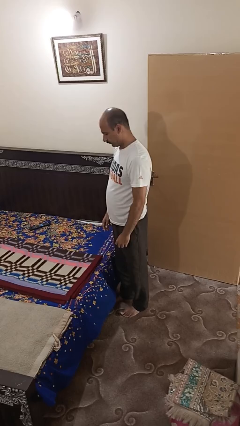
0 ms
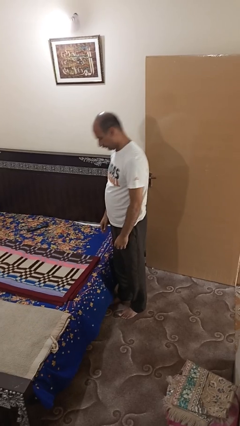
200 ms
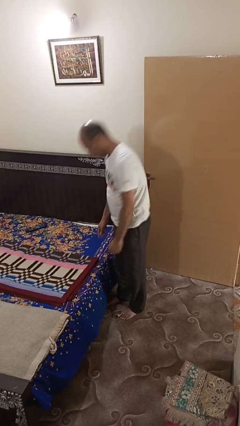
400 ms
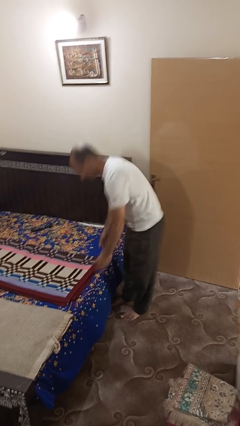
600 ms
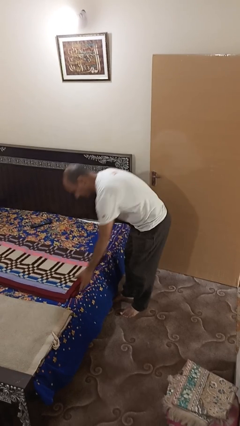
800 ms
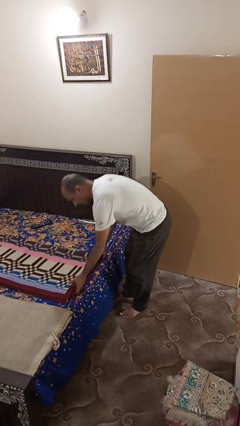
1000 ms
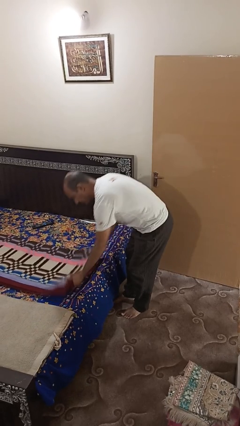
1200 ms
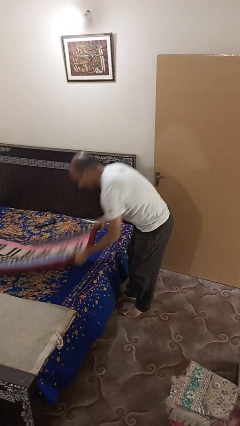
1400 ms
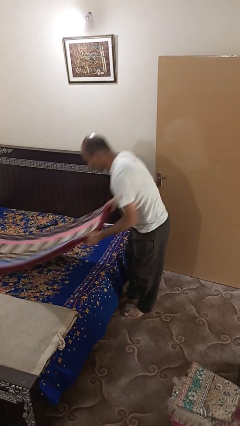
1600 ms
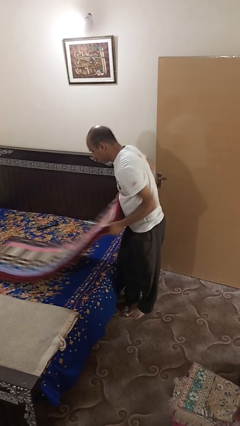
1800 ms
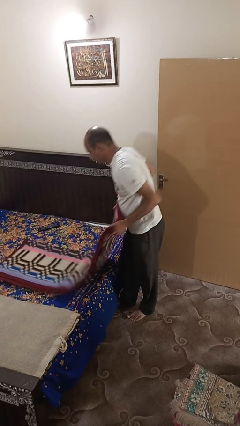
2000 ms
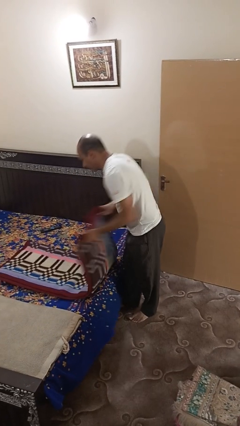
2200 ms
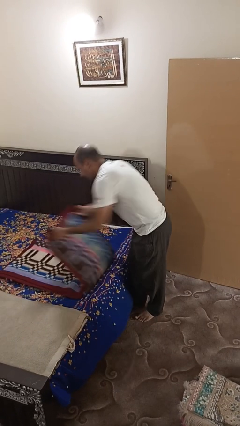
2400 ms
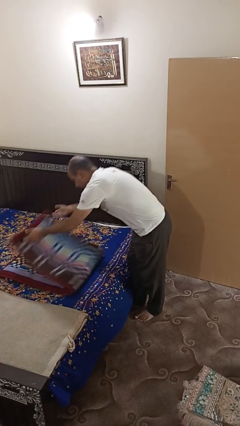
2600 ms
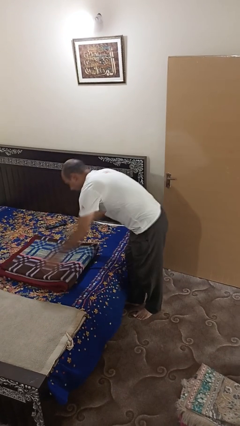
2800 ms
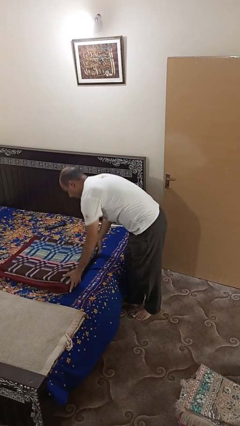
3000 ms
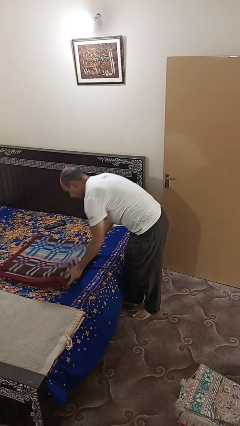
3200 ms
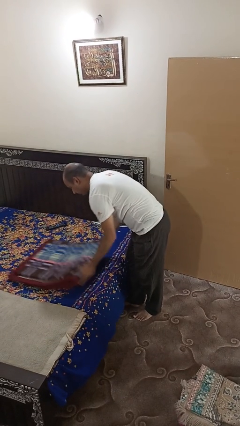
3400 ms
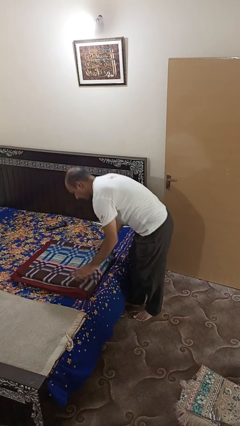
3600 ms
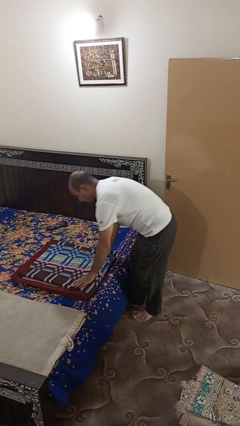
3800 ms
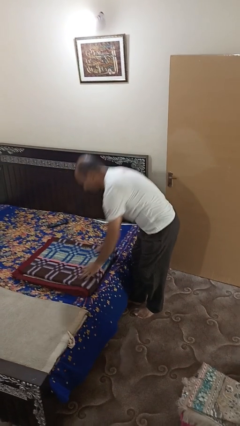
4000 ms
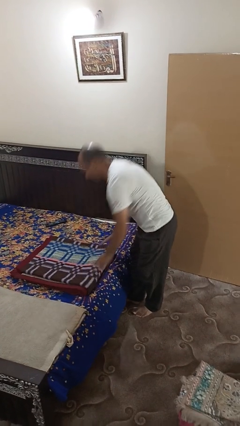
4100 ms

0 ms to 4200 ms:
person folds blanket

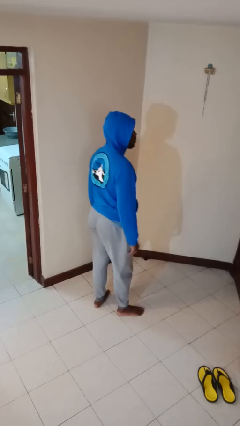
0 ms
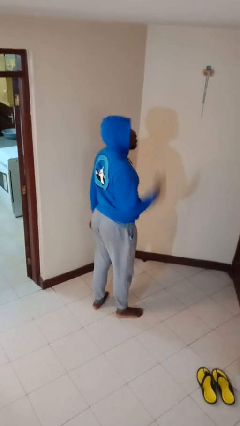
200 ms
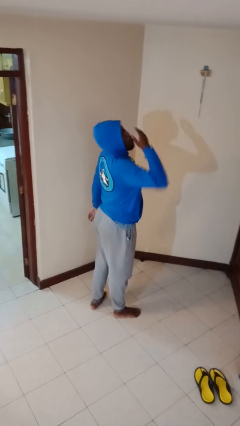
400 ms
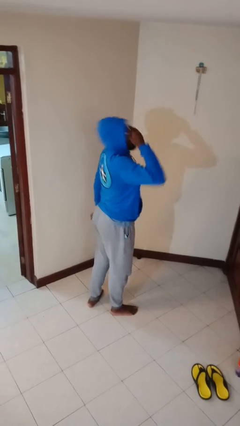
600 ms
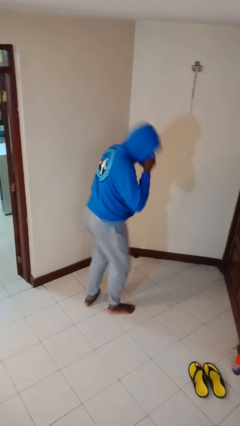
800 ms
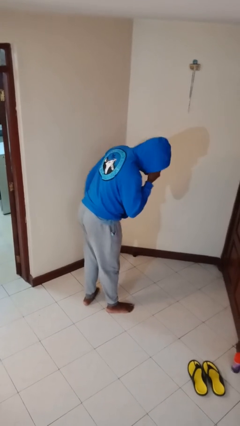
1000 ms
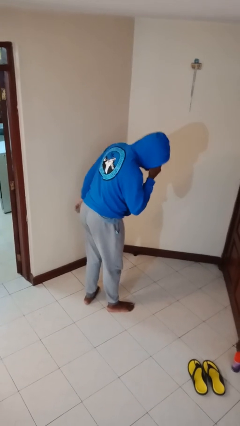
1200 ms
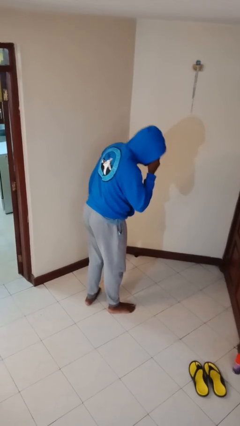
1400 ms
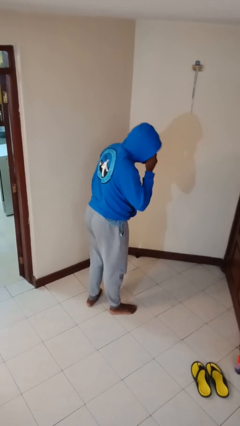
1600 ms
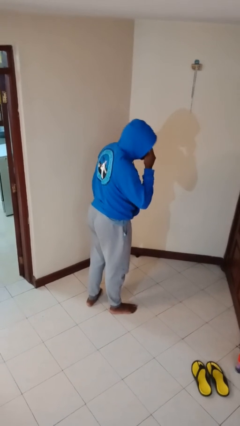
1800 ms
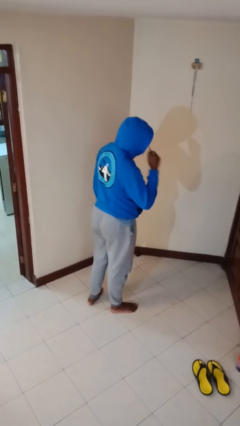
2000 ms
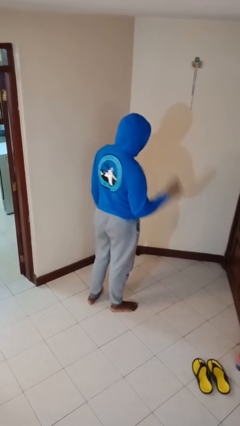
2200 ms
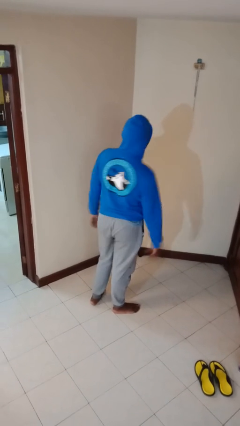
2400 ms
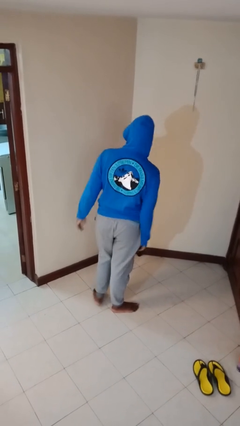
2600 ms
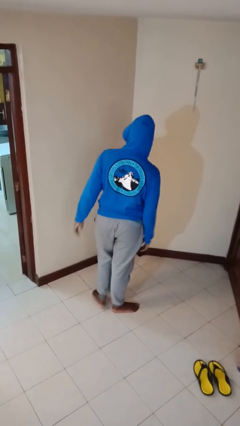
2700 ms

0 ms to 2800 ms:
person sneezes into hand

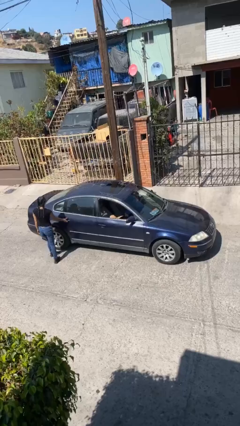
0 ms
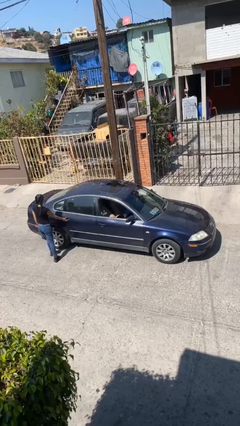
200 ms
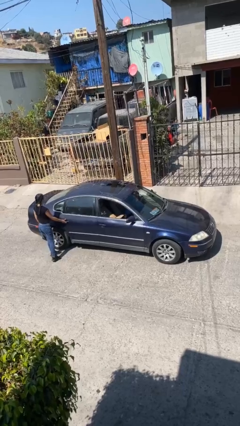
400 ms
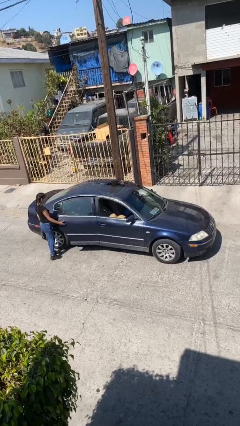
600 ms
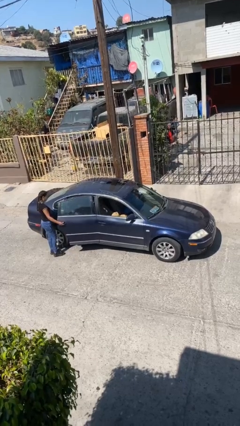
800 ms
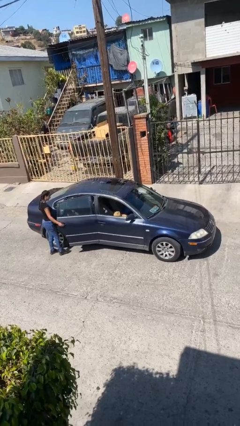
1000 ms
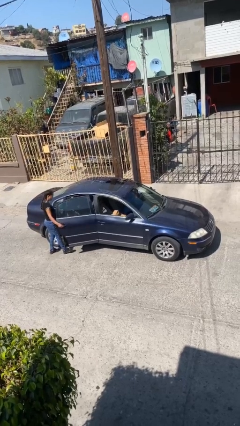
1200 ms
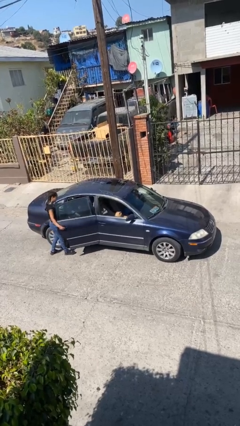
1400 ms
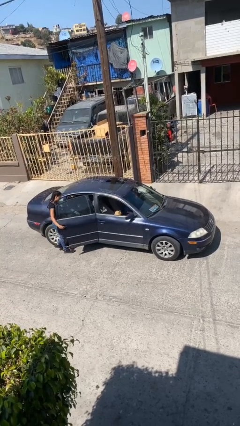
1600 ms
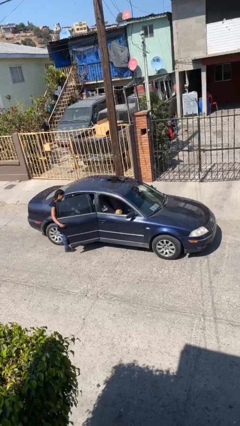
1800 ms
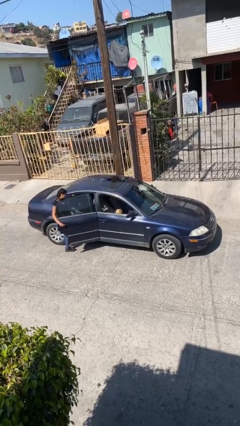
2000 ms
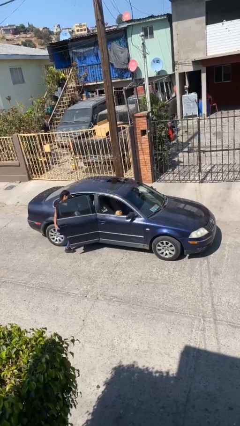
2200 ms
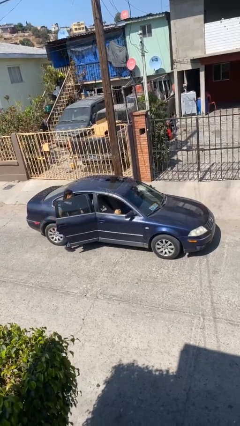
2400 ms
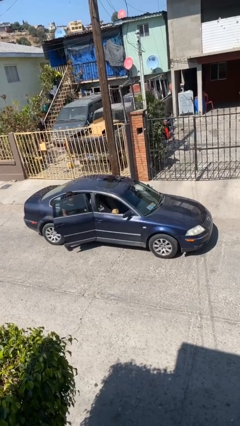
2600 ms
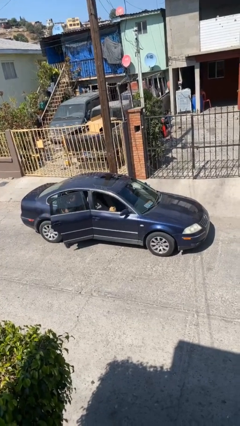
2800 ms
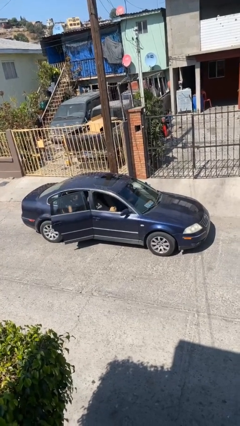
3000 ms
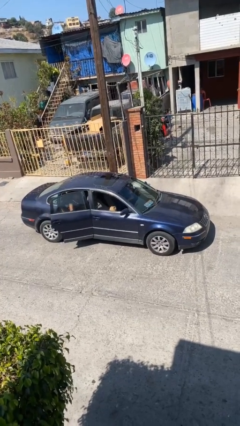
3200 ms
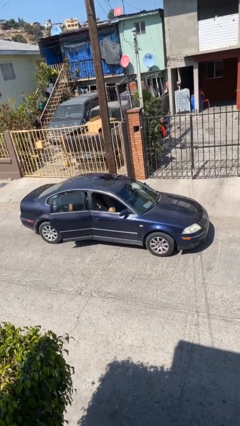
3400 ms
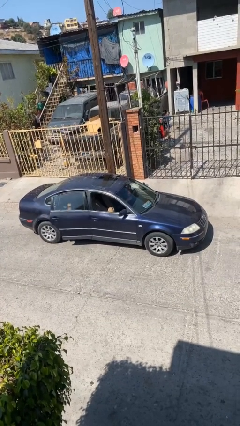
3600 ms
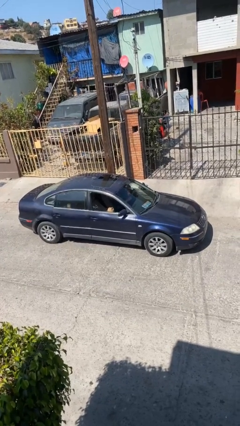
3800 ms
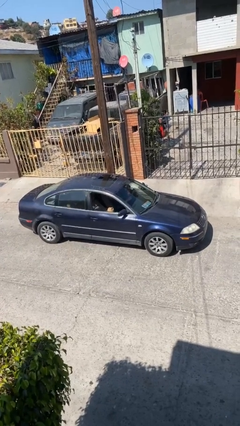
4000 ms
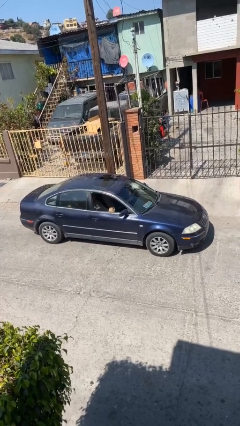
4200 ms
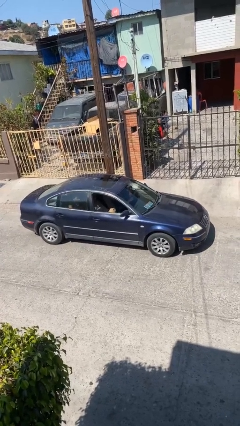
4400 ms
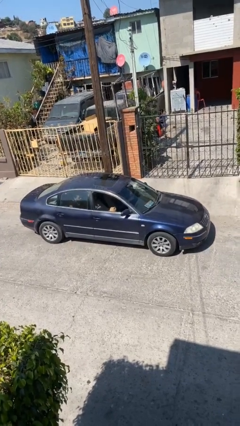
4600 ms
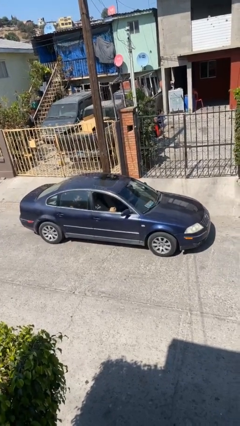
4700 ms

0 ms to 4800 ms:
car picks up person

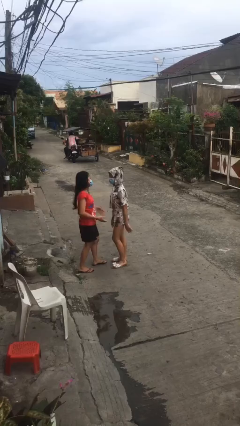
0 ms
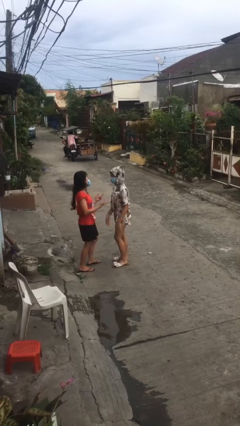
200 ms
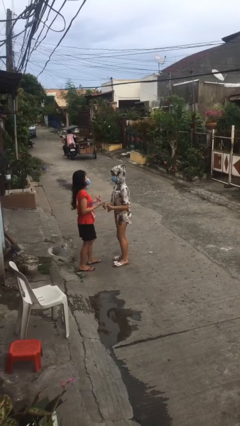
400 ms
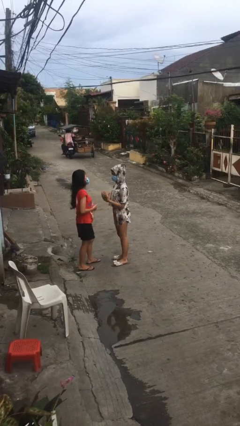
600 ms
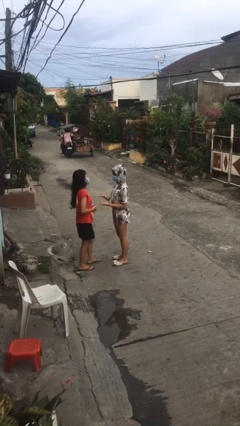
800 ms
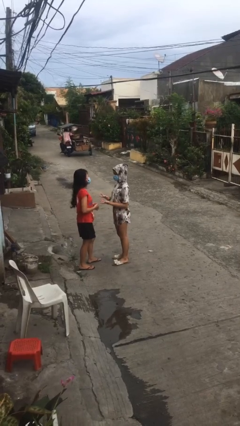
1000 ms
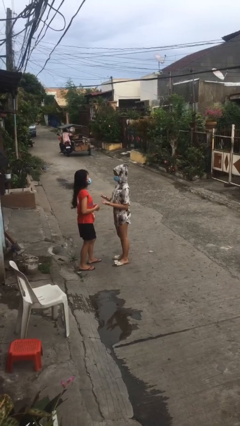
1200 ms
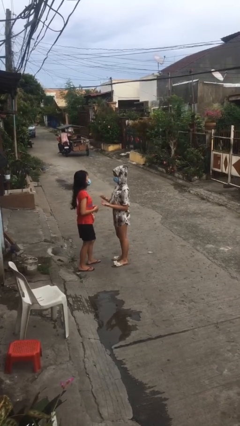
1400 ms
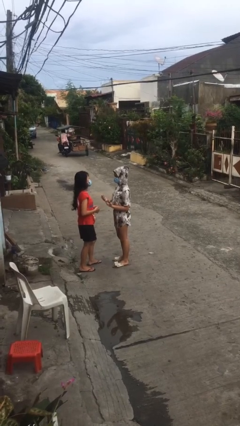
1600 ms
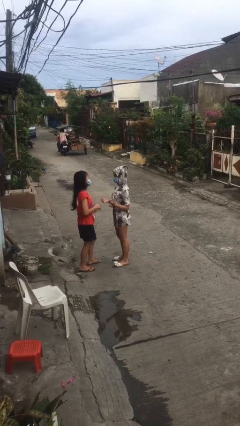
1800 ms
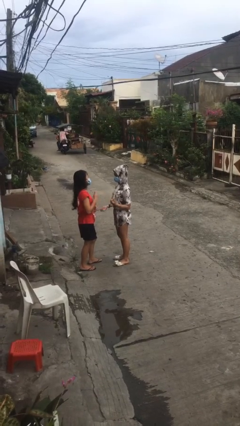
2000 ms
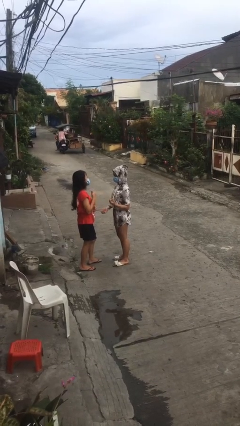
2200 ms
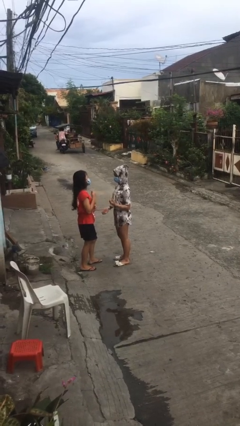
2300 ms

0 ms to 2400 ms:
person talks to person

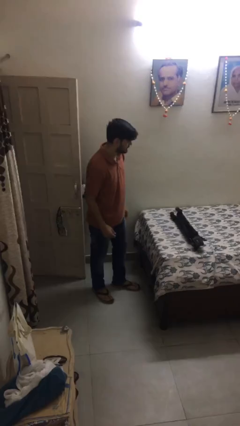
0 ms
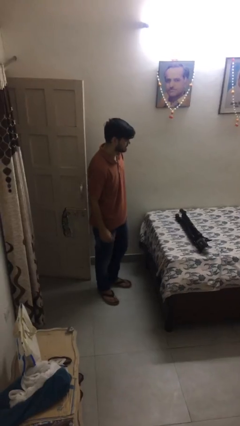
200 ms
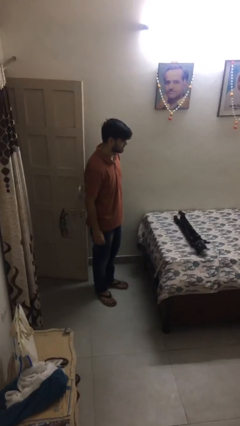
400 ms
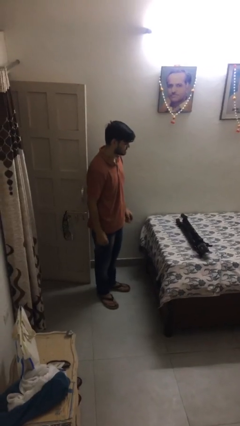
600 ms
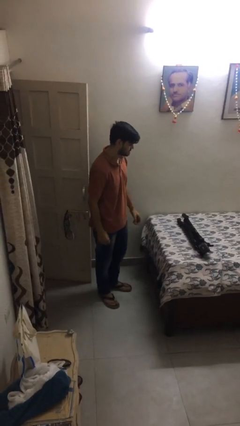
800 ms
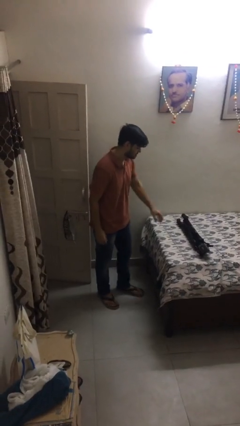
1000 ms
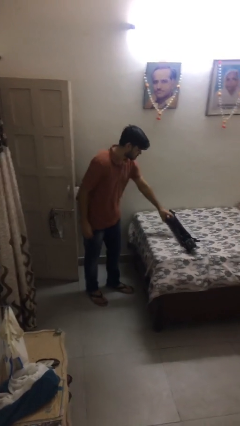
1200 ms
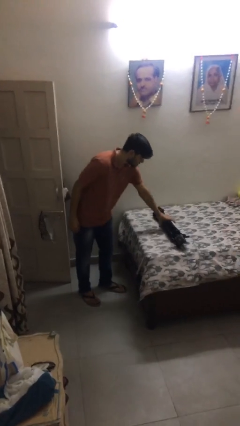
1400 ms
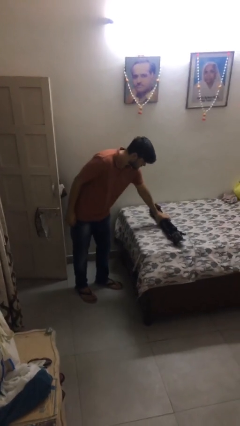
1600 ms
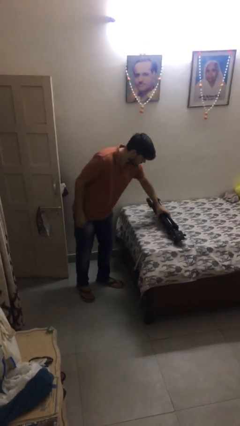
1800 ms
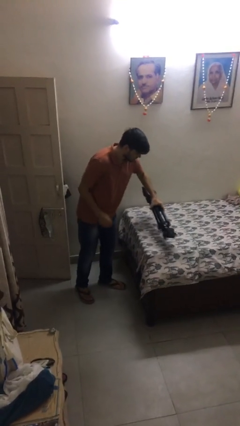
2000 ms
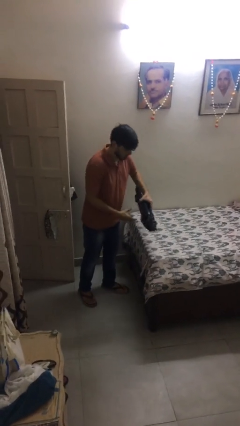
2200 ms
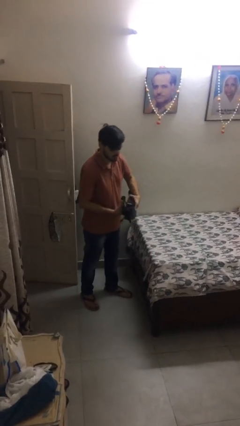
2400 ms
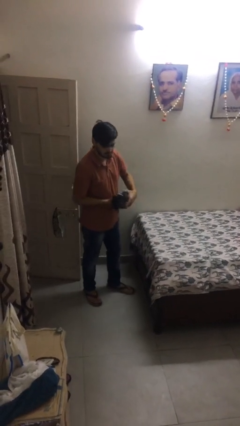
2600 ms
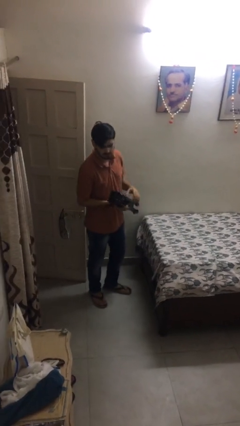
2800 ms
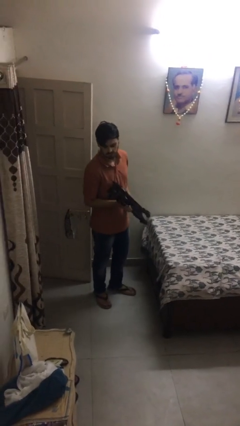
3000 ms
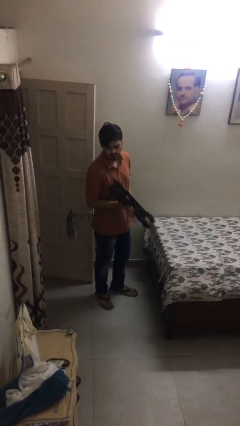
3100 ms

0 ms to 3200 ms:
person picks up object from bed

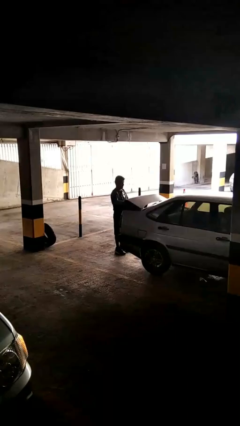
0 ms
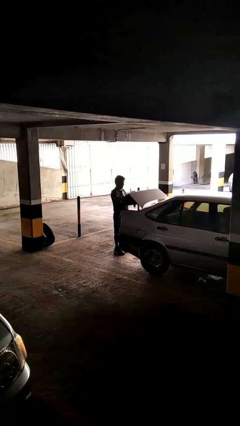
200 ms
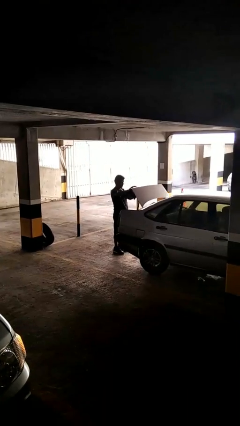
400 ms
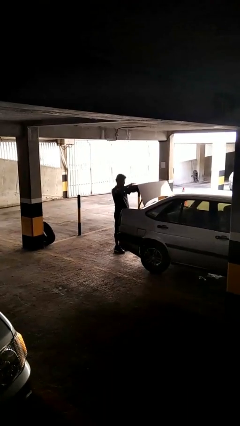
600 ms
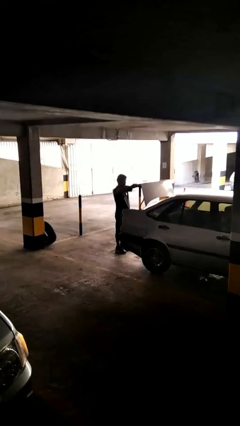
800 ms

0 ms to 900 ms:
person opens car trunk
